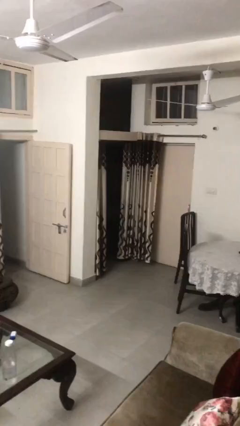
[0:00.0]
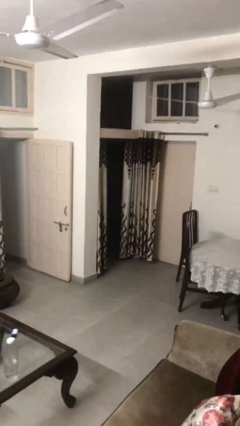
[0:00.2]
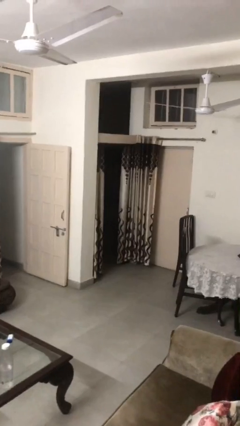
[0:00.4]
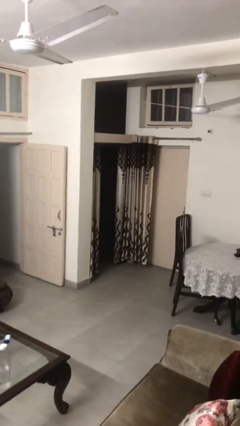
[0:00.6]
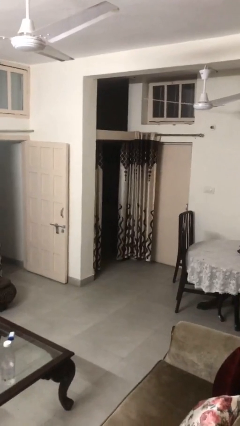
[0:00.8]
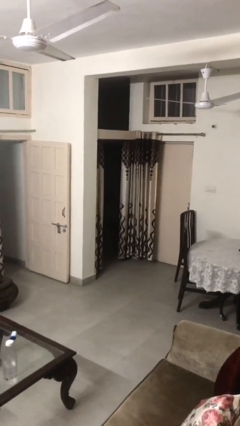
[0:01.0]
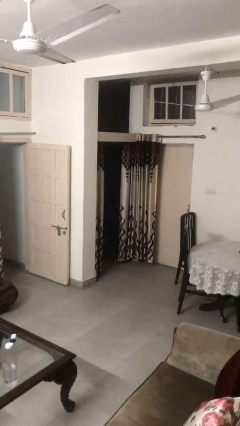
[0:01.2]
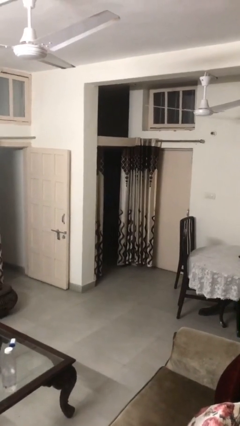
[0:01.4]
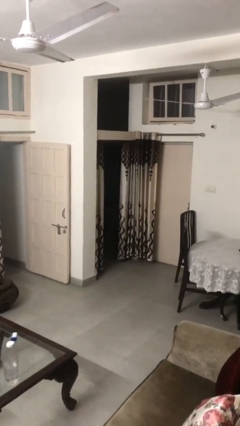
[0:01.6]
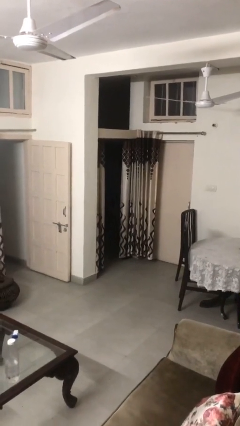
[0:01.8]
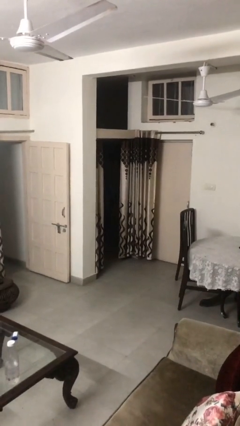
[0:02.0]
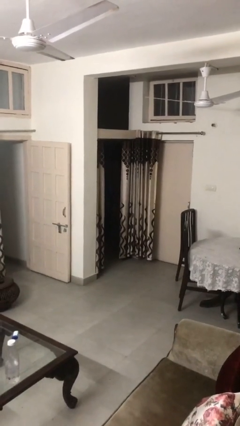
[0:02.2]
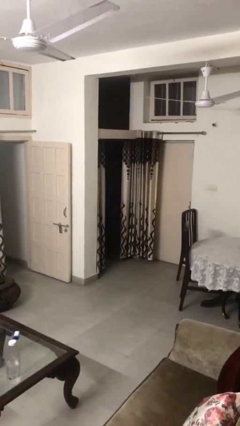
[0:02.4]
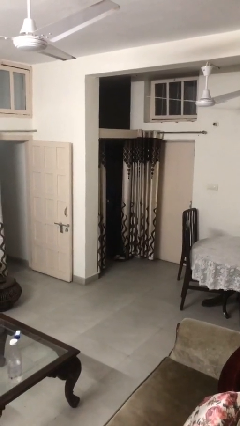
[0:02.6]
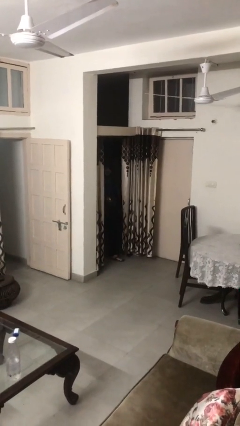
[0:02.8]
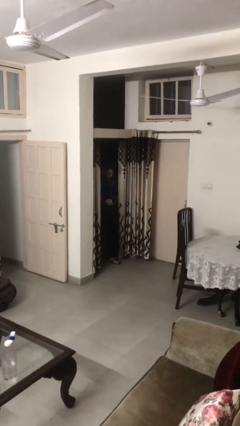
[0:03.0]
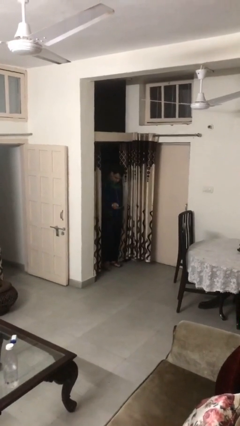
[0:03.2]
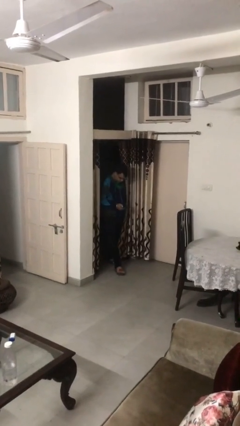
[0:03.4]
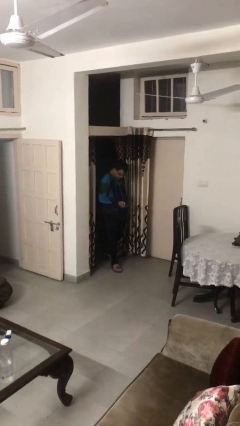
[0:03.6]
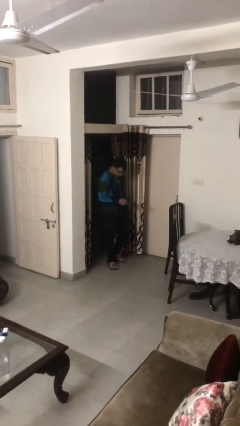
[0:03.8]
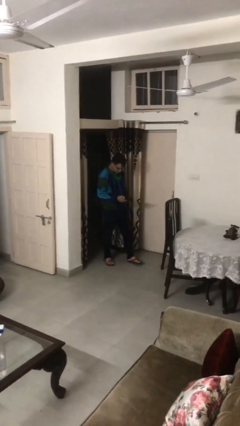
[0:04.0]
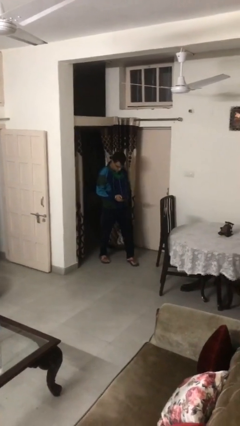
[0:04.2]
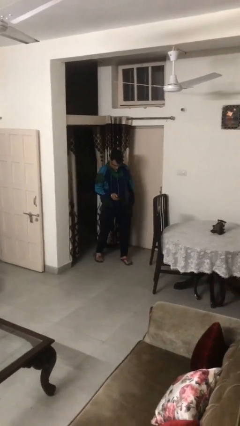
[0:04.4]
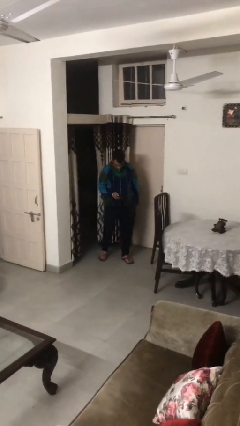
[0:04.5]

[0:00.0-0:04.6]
person enters scene through structure

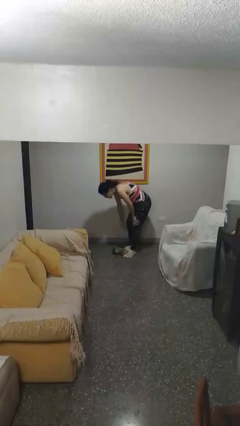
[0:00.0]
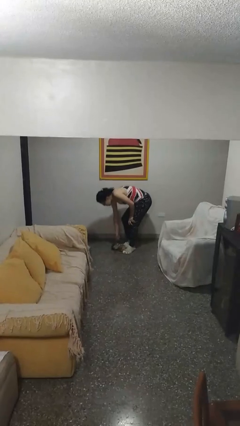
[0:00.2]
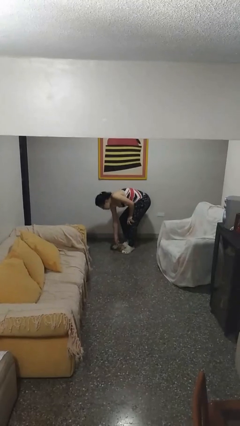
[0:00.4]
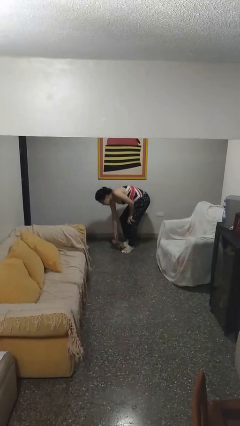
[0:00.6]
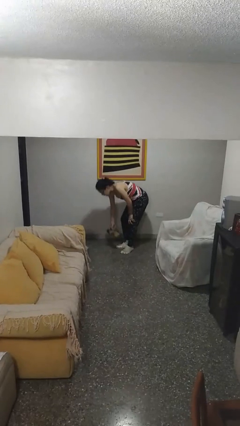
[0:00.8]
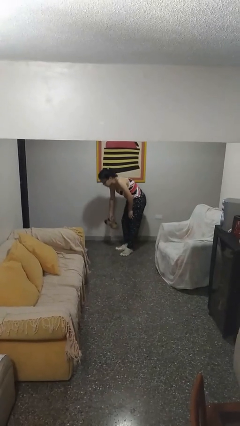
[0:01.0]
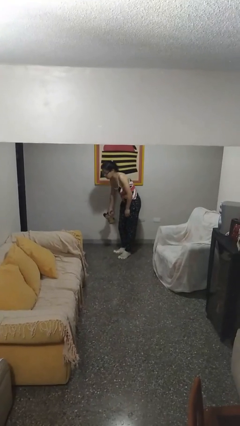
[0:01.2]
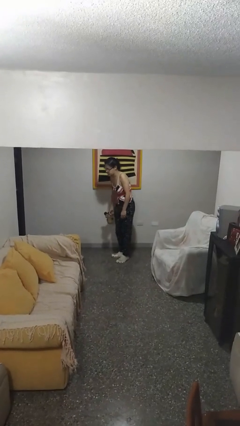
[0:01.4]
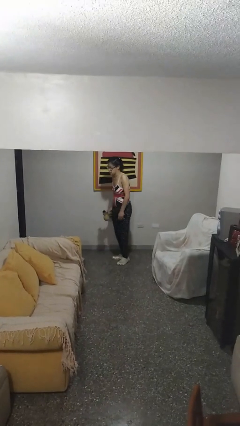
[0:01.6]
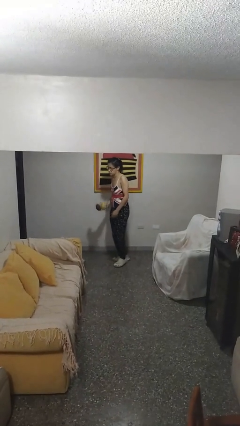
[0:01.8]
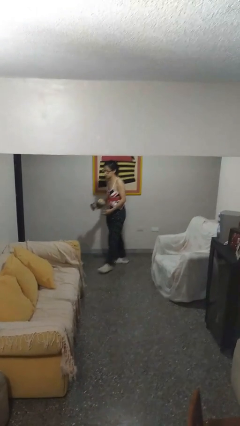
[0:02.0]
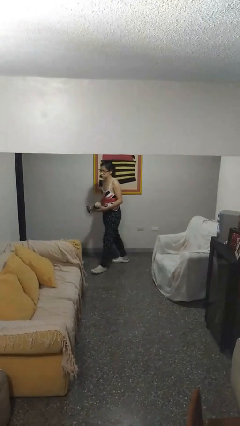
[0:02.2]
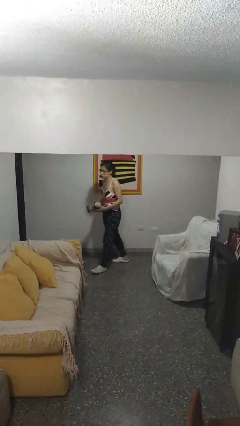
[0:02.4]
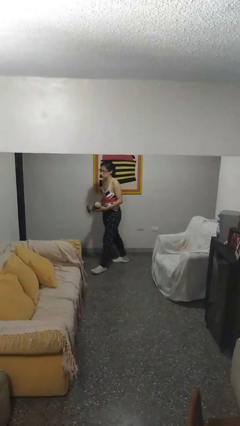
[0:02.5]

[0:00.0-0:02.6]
person picks up object from floor

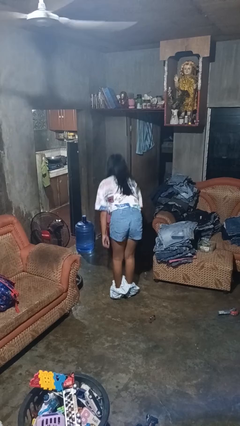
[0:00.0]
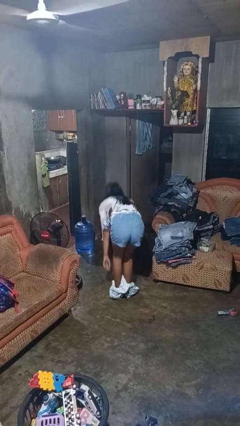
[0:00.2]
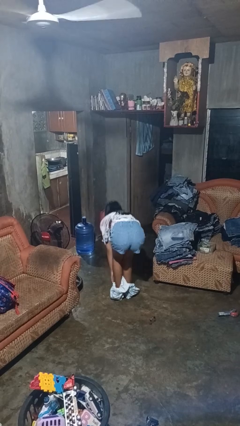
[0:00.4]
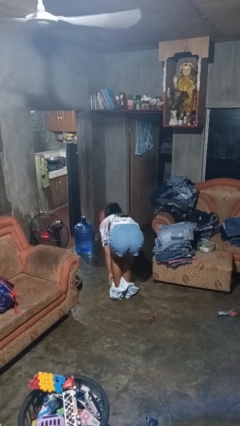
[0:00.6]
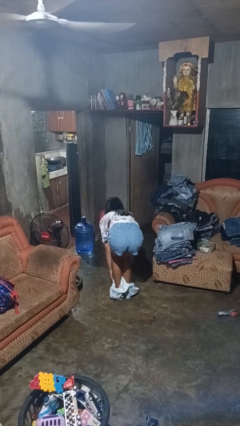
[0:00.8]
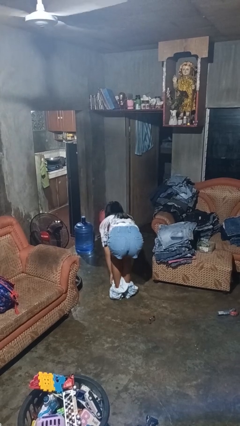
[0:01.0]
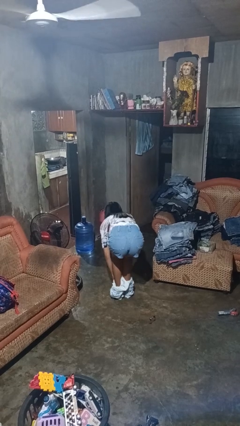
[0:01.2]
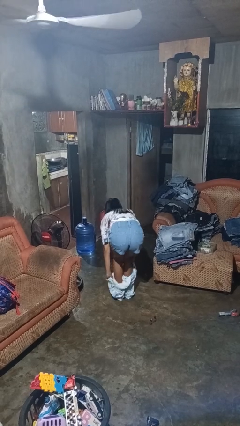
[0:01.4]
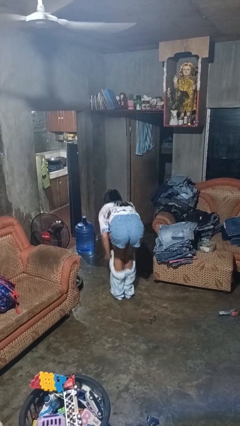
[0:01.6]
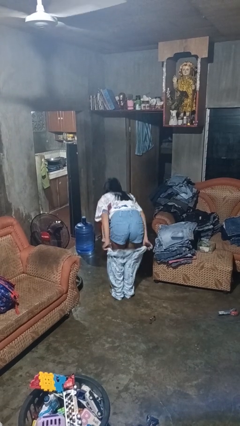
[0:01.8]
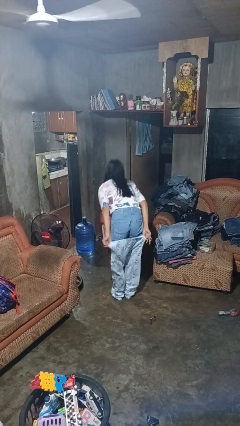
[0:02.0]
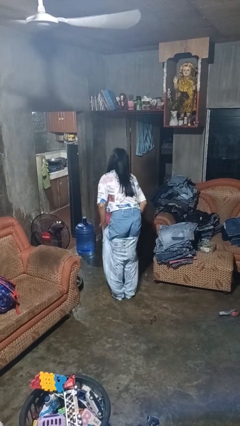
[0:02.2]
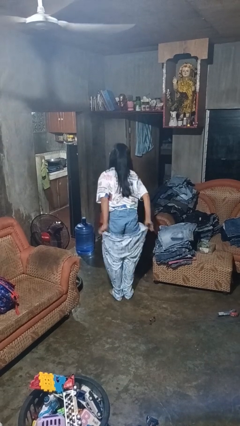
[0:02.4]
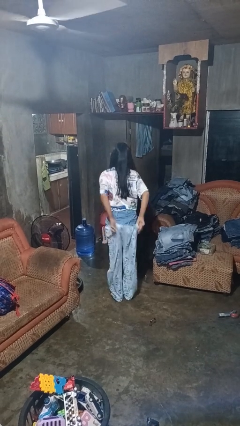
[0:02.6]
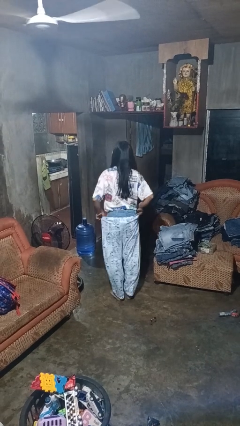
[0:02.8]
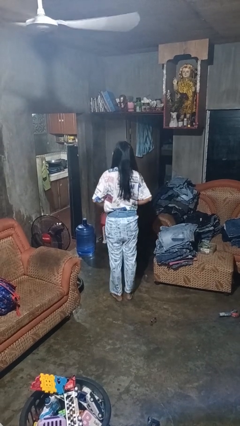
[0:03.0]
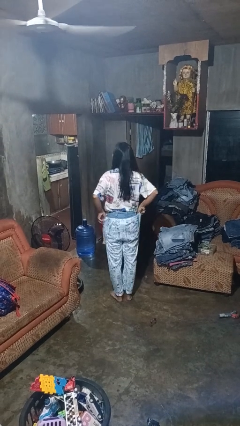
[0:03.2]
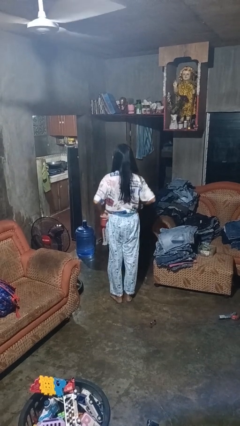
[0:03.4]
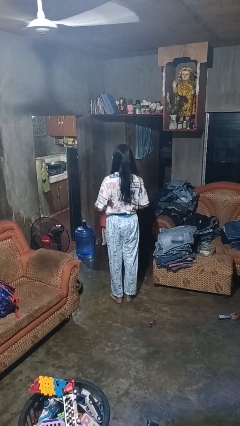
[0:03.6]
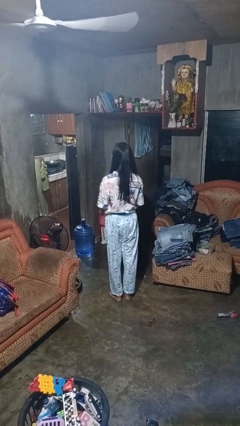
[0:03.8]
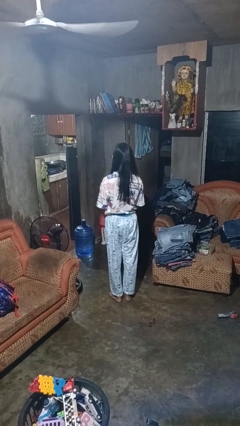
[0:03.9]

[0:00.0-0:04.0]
person puts on pants

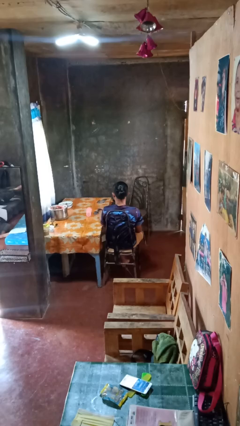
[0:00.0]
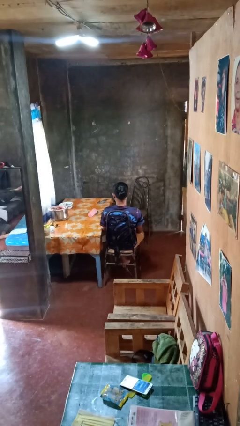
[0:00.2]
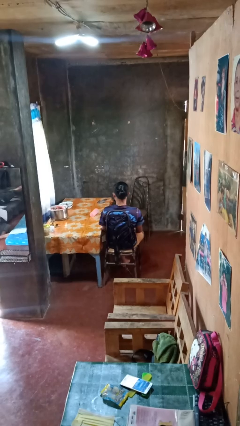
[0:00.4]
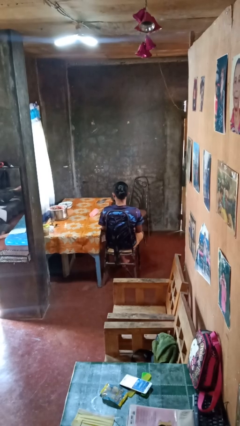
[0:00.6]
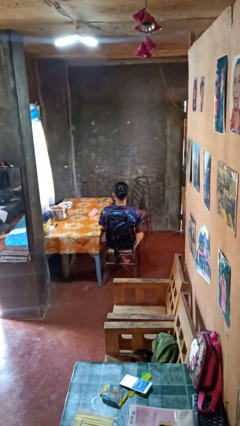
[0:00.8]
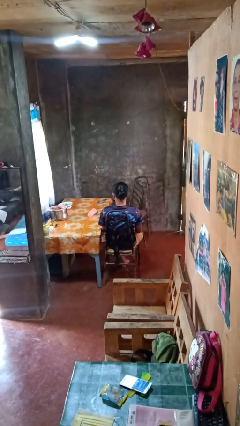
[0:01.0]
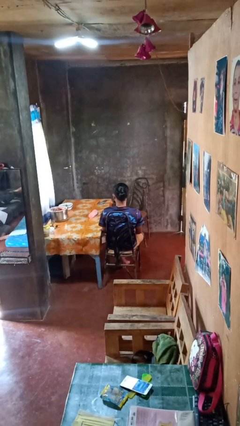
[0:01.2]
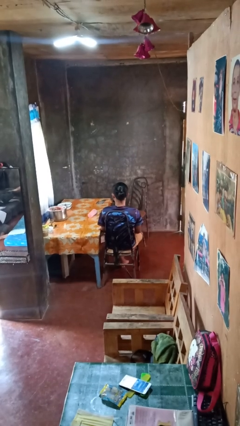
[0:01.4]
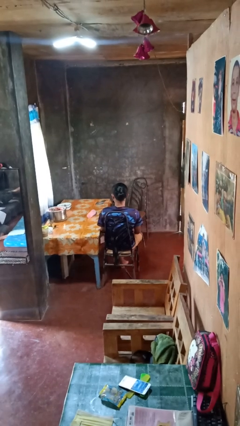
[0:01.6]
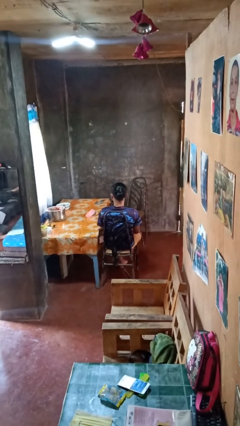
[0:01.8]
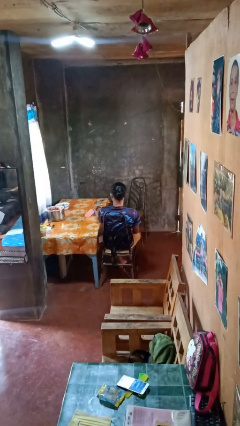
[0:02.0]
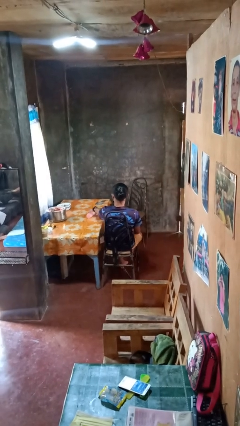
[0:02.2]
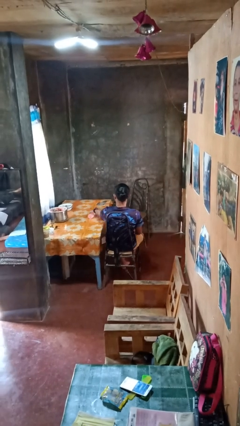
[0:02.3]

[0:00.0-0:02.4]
person knocks over glass

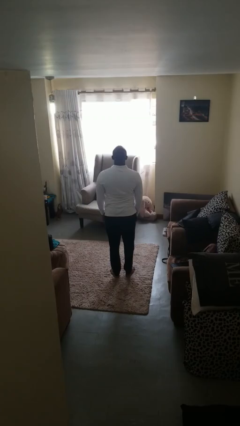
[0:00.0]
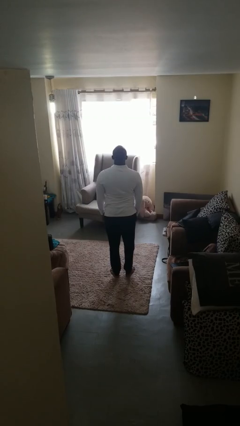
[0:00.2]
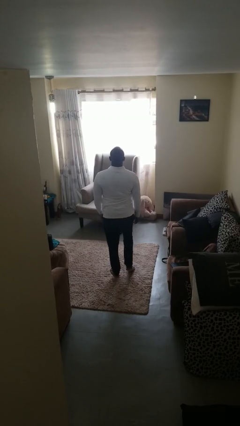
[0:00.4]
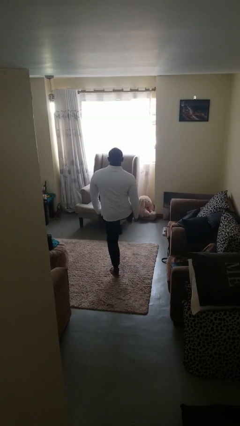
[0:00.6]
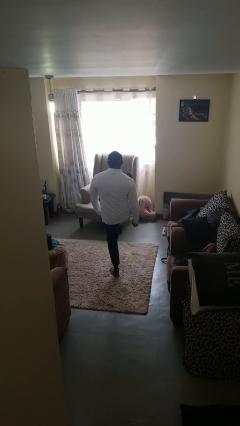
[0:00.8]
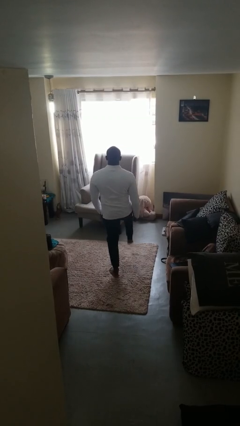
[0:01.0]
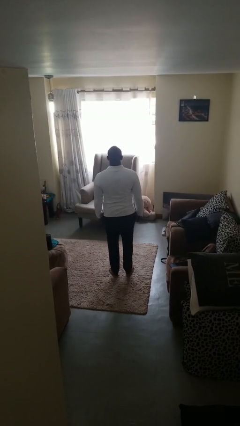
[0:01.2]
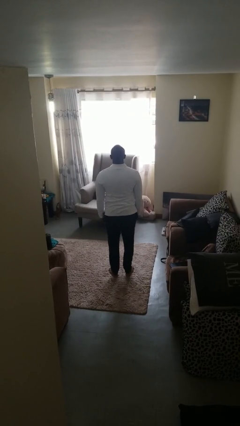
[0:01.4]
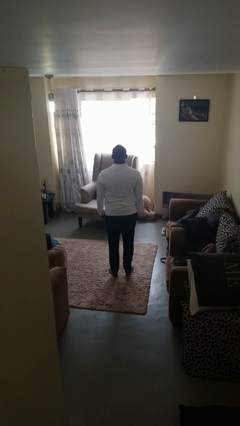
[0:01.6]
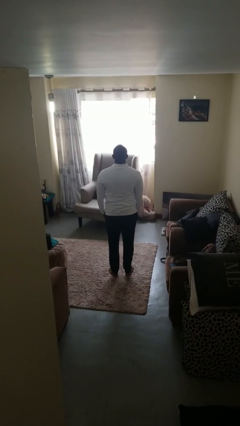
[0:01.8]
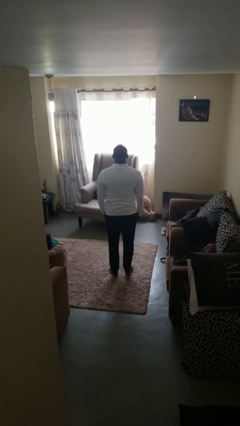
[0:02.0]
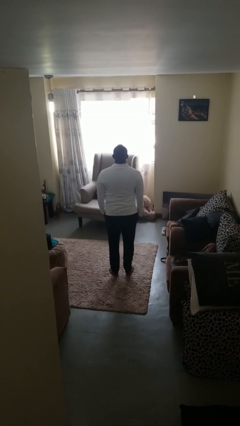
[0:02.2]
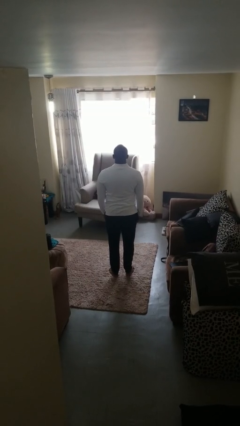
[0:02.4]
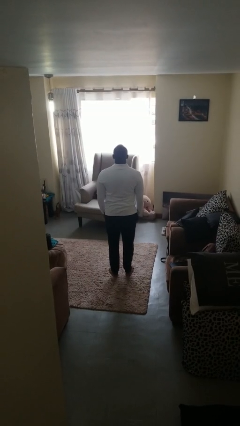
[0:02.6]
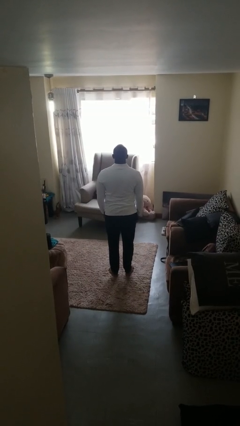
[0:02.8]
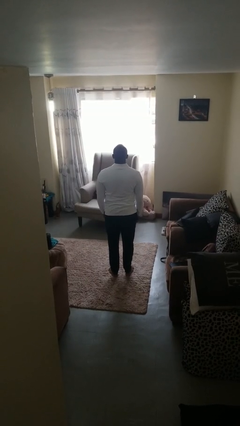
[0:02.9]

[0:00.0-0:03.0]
person karate kicks

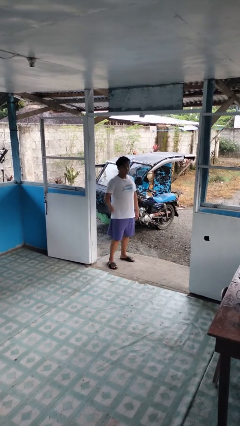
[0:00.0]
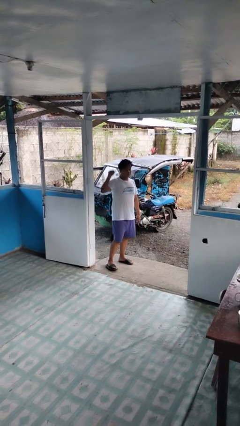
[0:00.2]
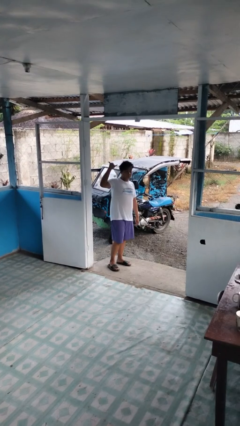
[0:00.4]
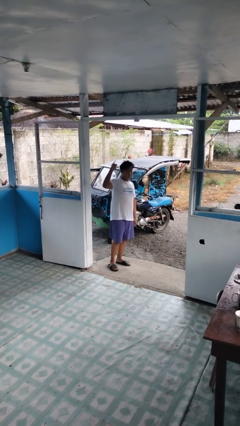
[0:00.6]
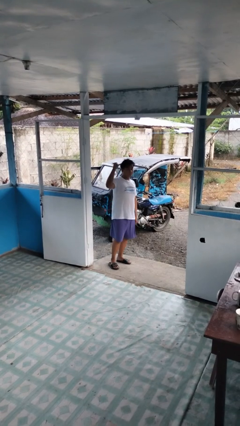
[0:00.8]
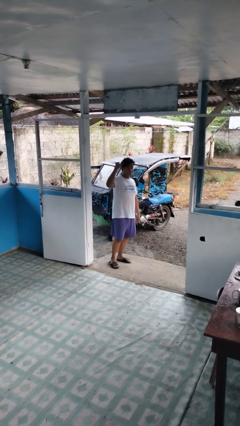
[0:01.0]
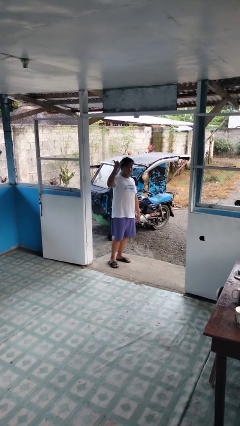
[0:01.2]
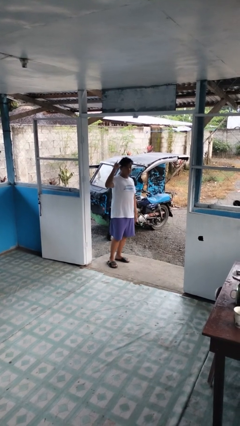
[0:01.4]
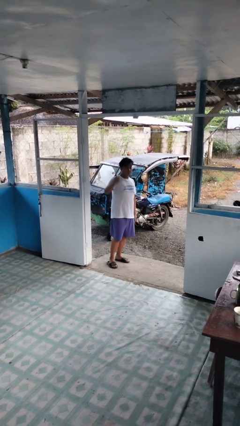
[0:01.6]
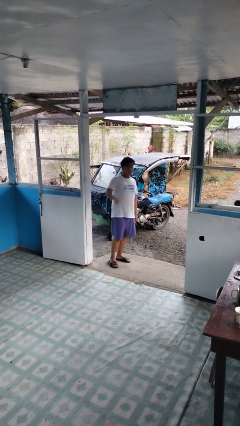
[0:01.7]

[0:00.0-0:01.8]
person gestures hang loose
